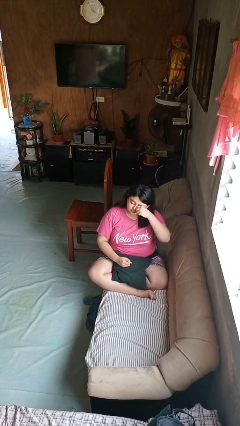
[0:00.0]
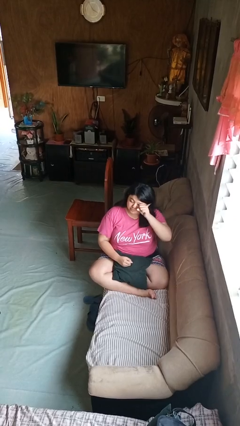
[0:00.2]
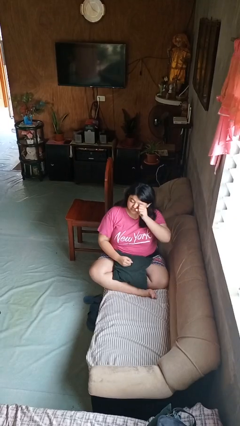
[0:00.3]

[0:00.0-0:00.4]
person rubs eyes

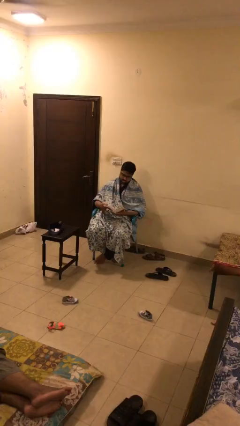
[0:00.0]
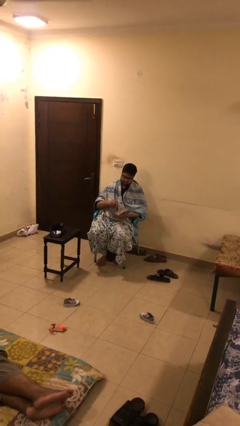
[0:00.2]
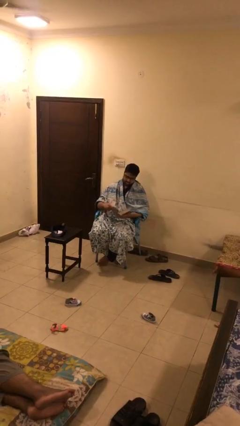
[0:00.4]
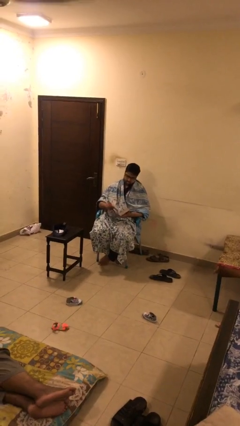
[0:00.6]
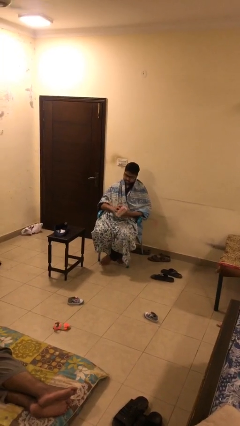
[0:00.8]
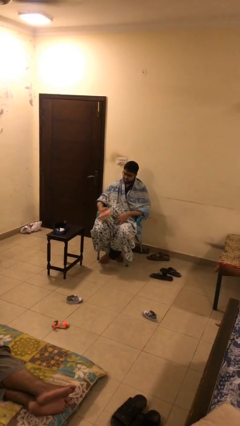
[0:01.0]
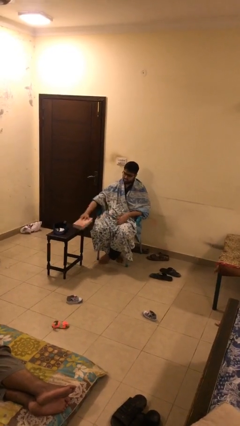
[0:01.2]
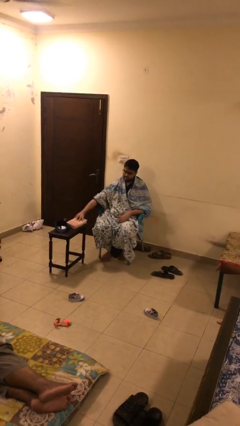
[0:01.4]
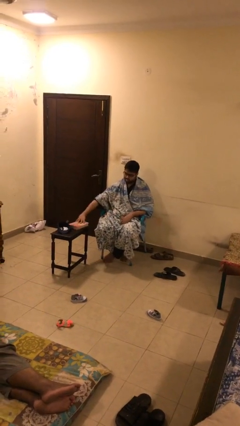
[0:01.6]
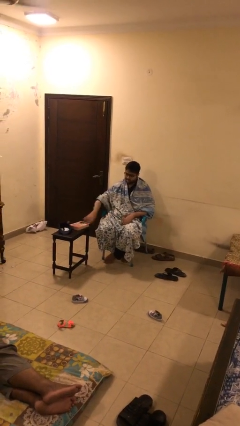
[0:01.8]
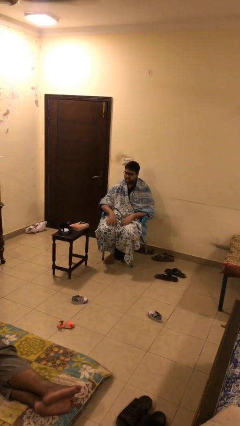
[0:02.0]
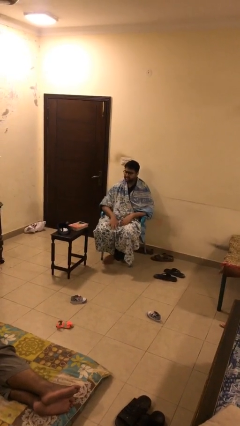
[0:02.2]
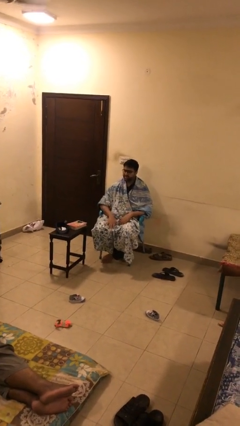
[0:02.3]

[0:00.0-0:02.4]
person puts down object on table

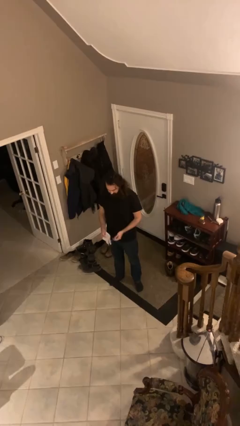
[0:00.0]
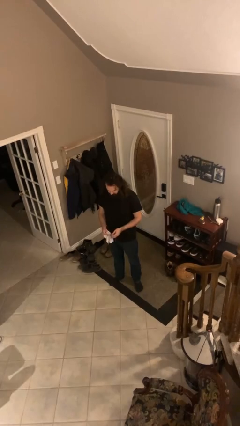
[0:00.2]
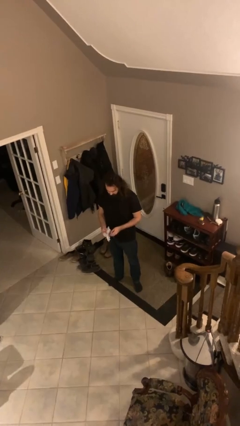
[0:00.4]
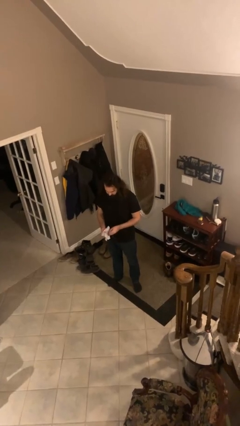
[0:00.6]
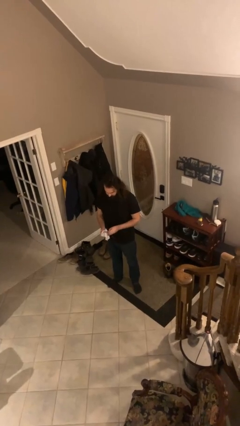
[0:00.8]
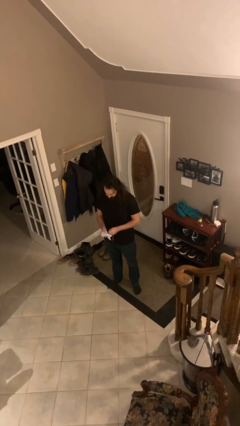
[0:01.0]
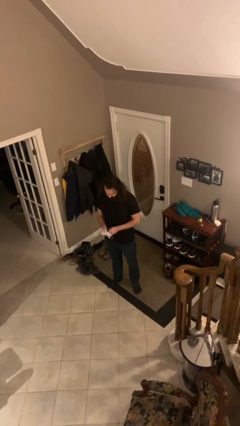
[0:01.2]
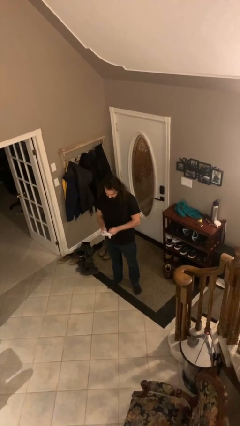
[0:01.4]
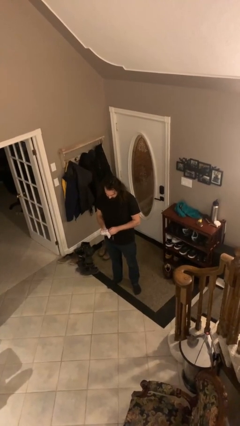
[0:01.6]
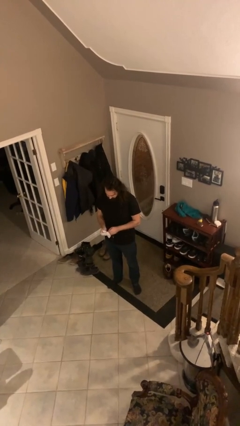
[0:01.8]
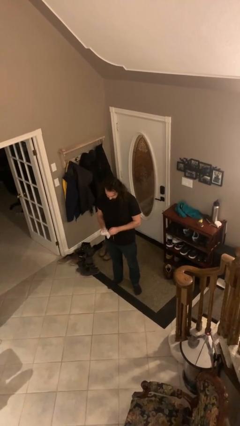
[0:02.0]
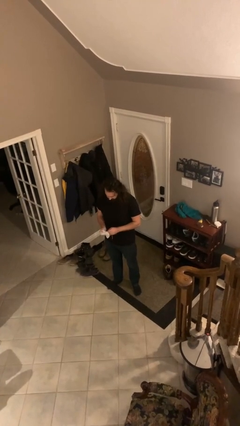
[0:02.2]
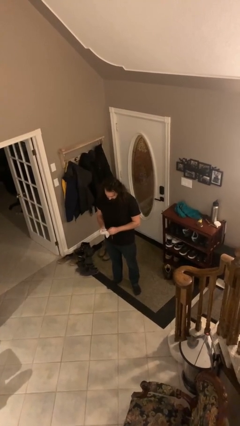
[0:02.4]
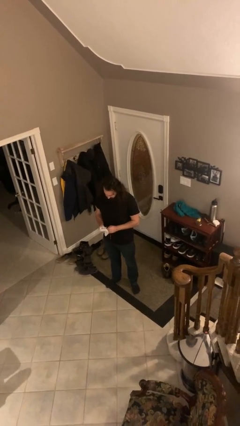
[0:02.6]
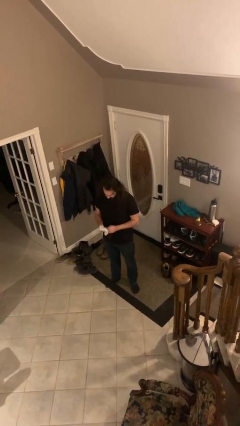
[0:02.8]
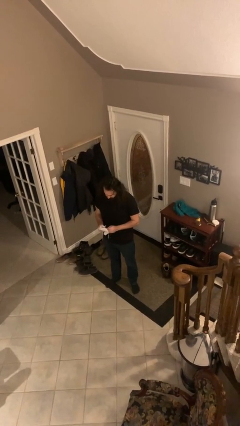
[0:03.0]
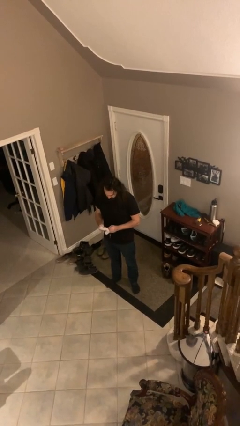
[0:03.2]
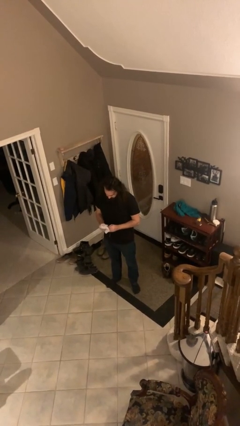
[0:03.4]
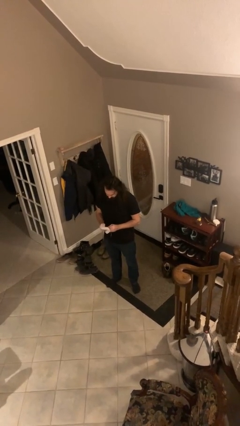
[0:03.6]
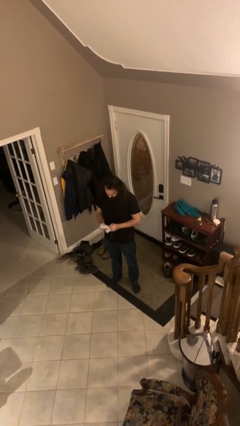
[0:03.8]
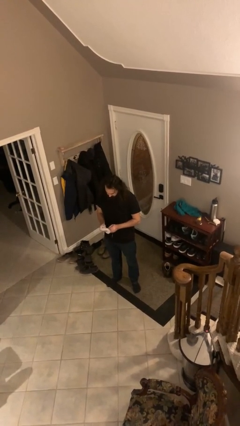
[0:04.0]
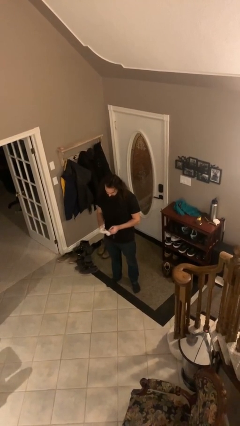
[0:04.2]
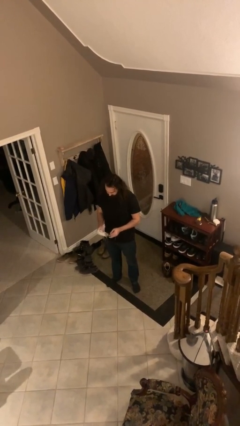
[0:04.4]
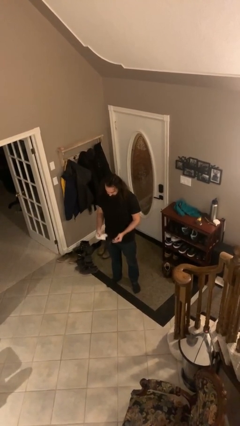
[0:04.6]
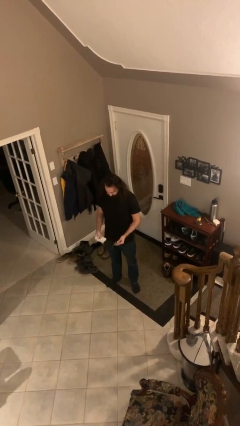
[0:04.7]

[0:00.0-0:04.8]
person cleans eyeglasses

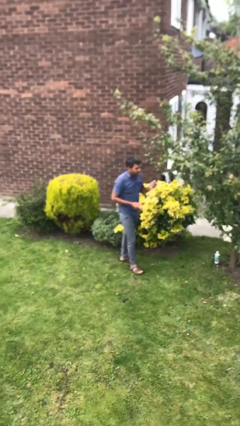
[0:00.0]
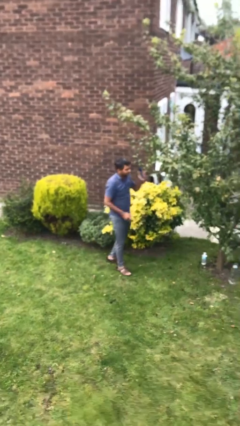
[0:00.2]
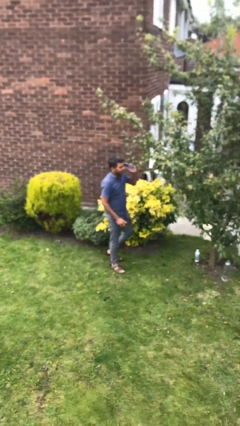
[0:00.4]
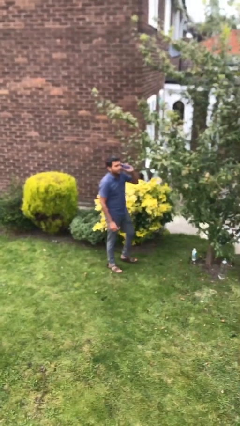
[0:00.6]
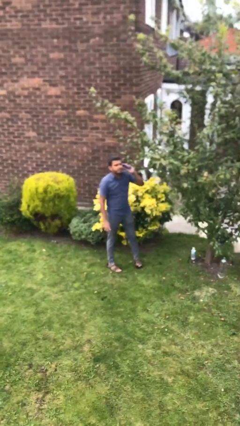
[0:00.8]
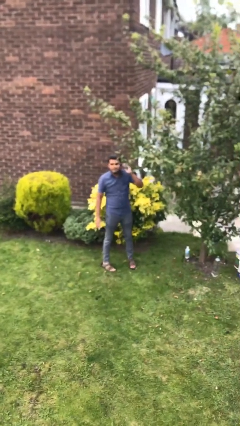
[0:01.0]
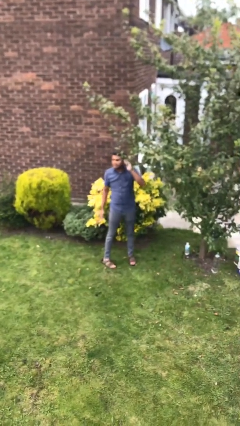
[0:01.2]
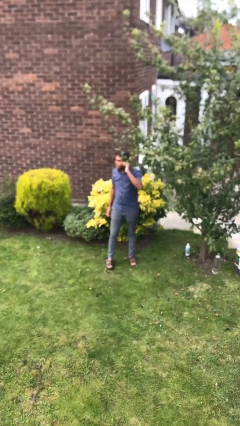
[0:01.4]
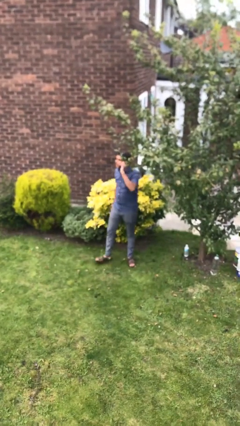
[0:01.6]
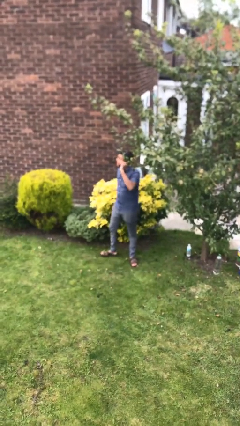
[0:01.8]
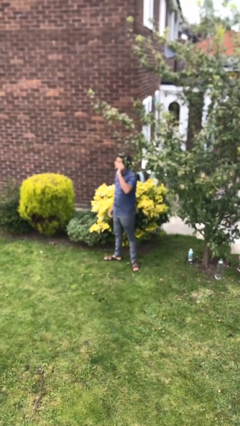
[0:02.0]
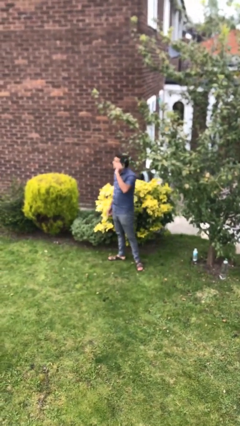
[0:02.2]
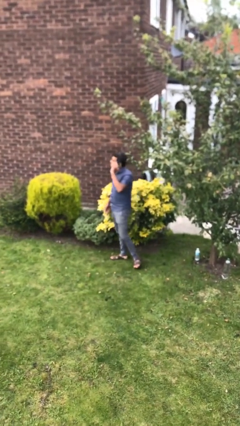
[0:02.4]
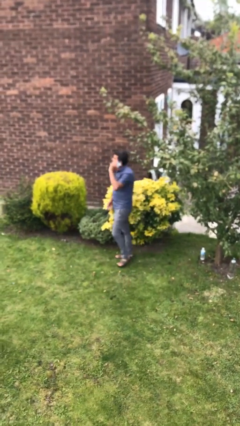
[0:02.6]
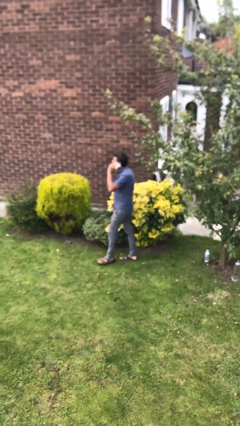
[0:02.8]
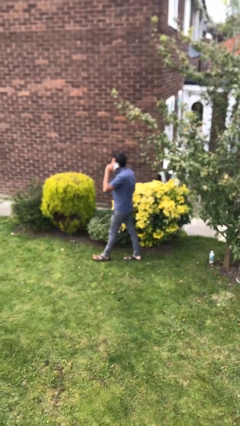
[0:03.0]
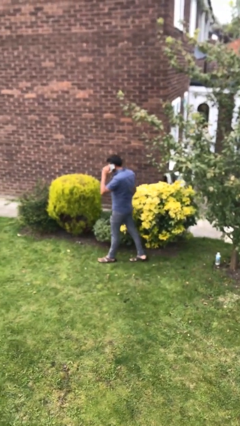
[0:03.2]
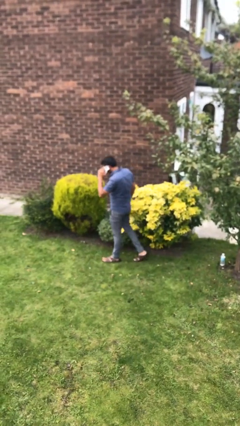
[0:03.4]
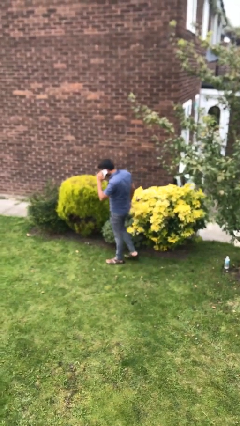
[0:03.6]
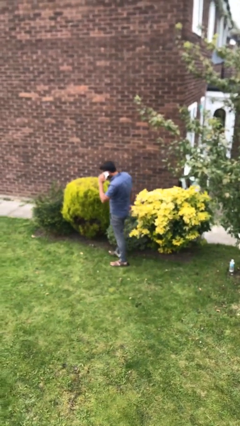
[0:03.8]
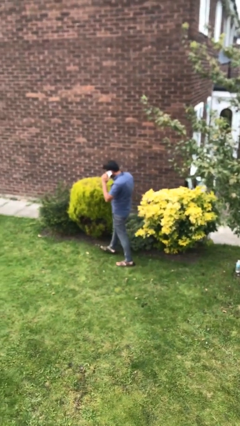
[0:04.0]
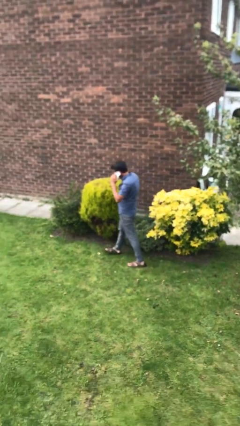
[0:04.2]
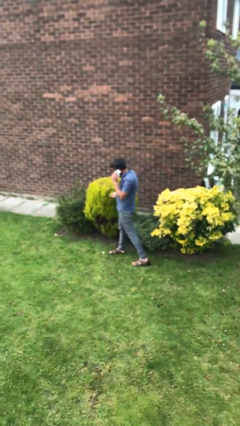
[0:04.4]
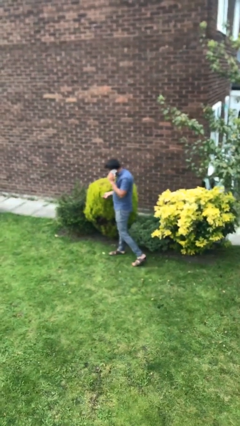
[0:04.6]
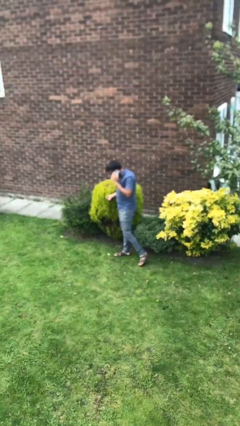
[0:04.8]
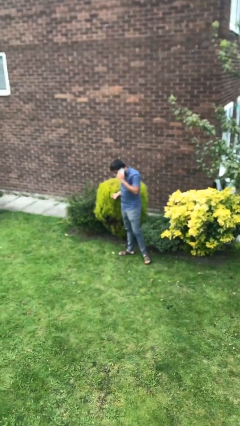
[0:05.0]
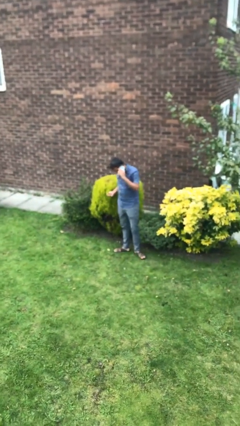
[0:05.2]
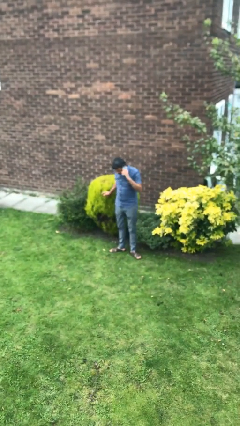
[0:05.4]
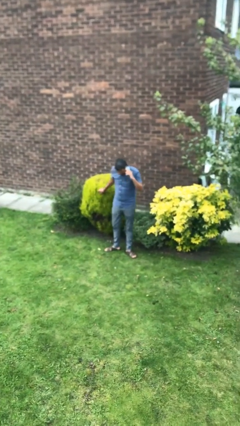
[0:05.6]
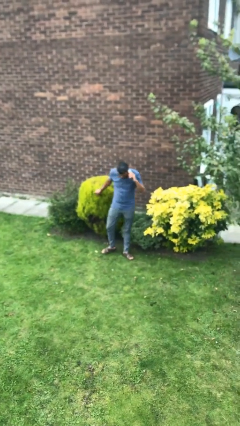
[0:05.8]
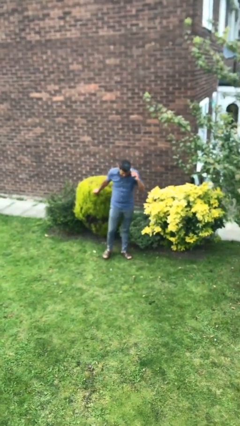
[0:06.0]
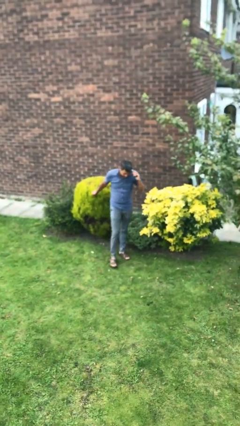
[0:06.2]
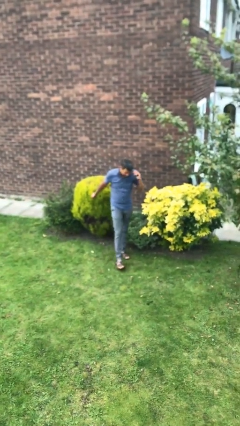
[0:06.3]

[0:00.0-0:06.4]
person talks on phone

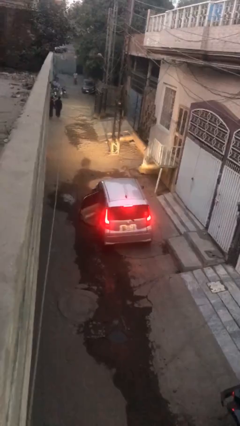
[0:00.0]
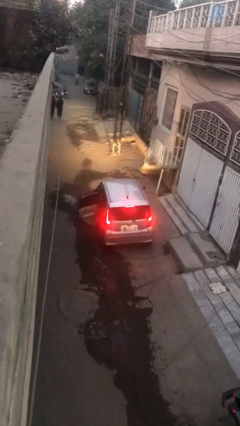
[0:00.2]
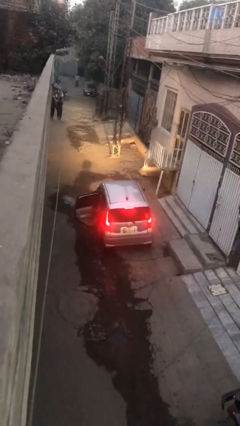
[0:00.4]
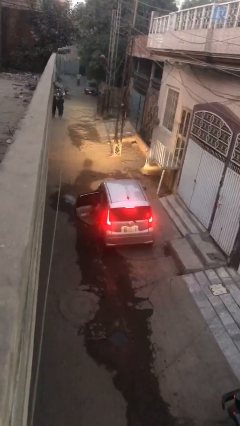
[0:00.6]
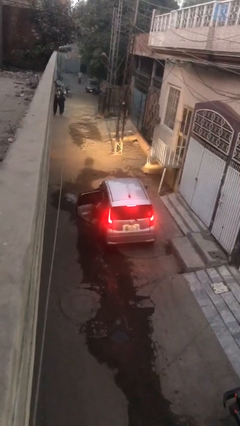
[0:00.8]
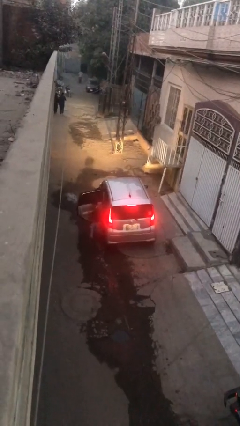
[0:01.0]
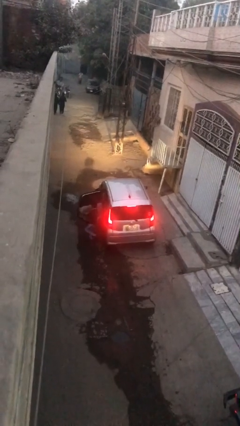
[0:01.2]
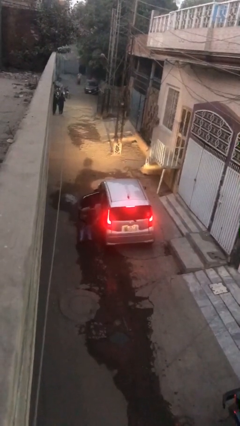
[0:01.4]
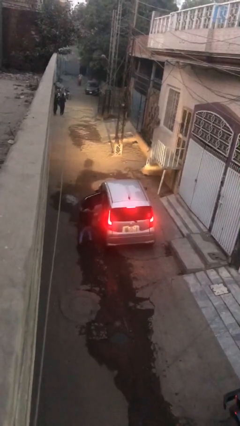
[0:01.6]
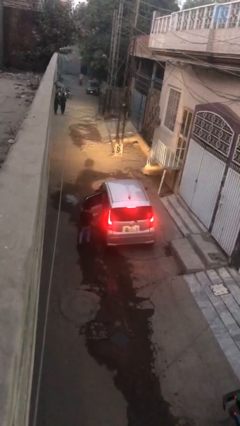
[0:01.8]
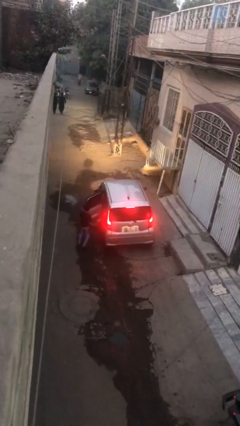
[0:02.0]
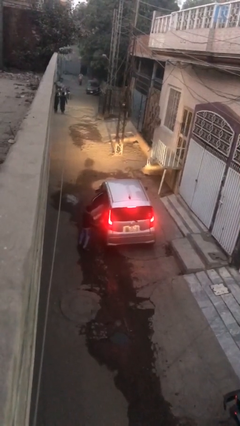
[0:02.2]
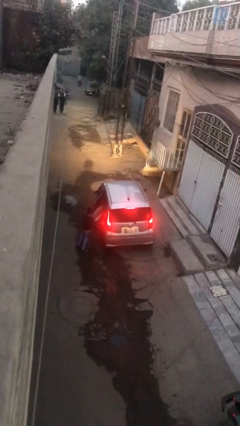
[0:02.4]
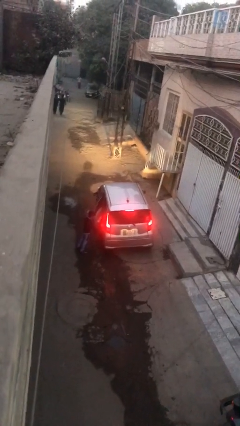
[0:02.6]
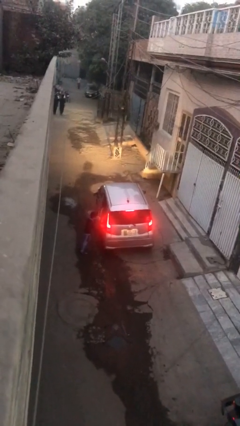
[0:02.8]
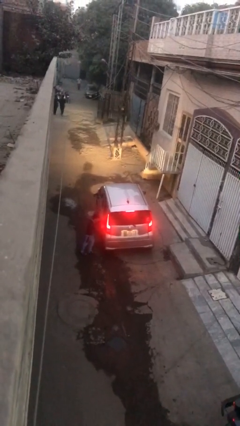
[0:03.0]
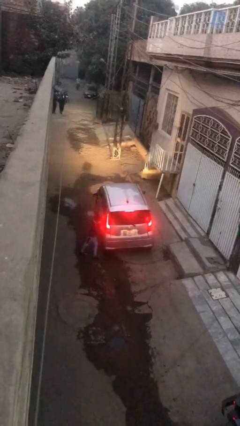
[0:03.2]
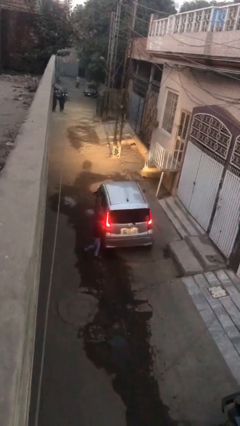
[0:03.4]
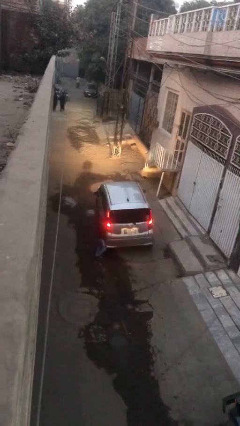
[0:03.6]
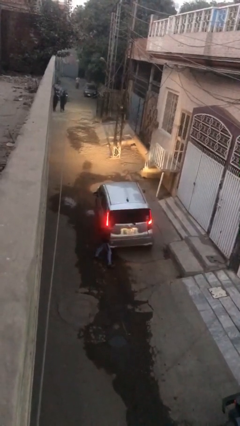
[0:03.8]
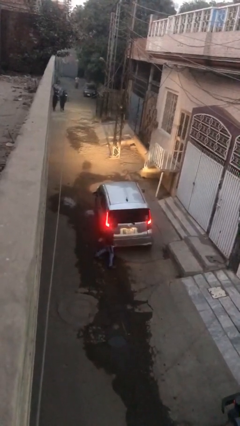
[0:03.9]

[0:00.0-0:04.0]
car drops off person
